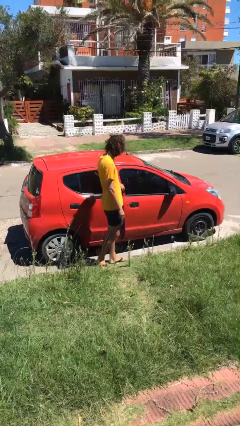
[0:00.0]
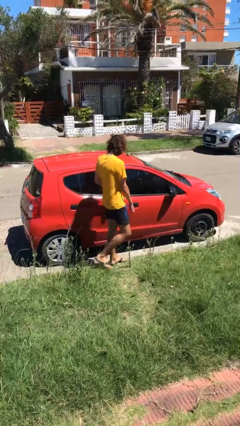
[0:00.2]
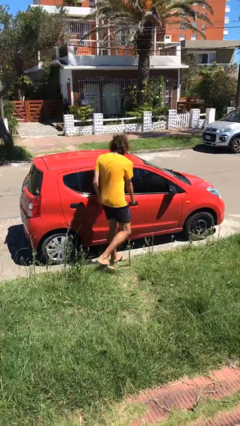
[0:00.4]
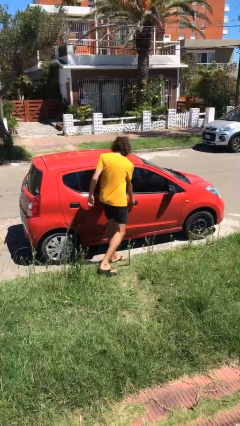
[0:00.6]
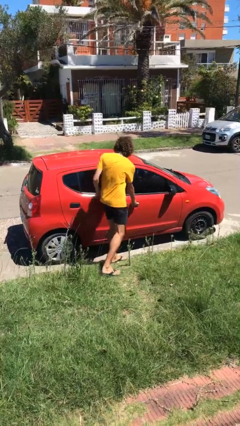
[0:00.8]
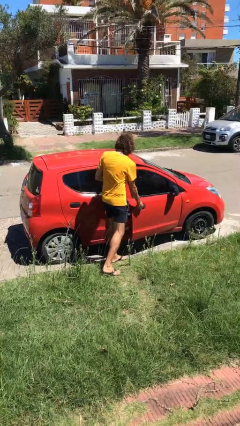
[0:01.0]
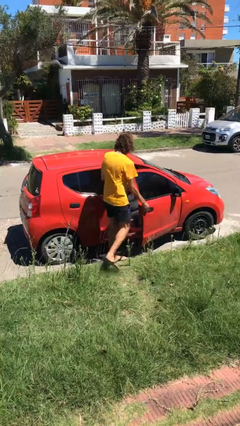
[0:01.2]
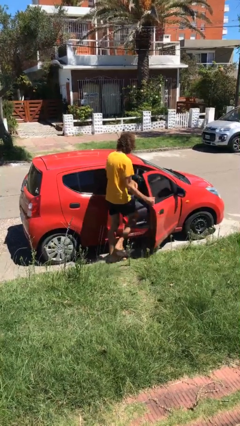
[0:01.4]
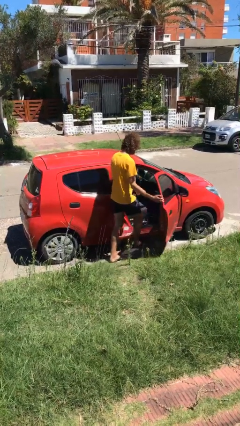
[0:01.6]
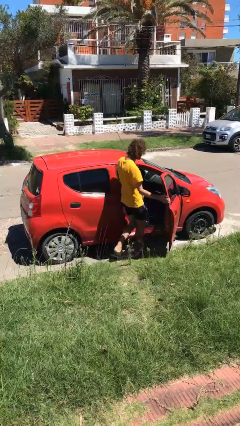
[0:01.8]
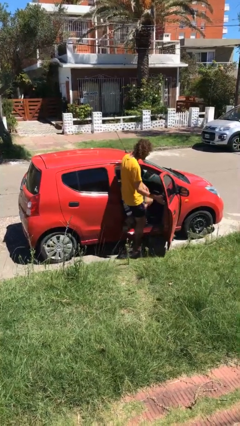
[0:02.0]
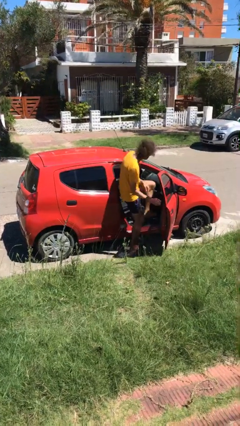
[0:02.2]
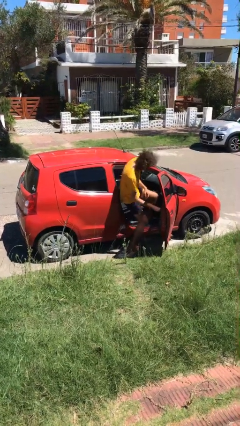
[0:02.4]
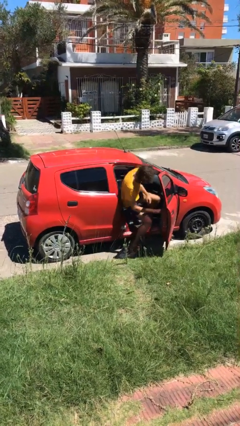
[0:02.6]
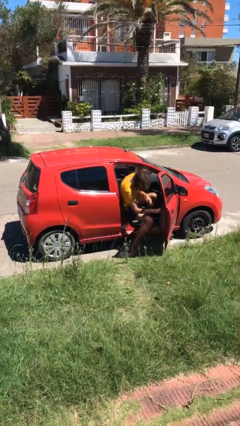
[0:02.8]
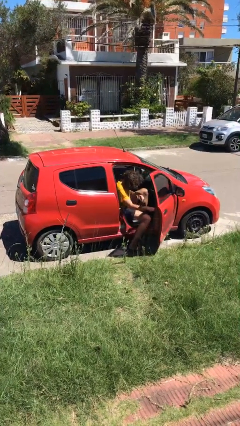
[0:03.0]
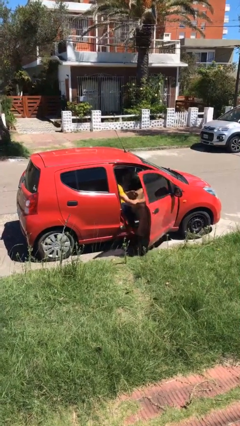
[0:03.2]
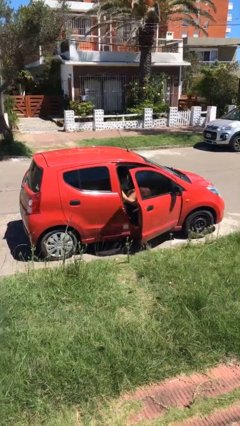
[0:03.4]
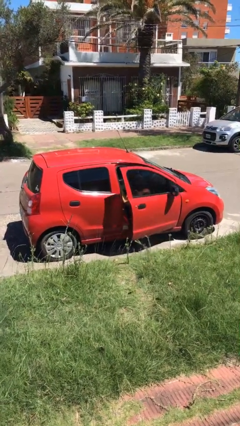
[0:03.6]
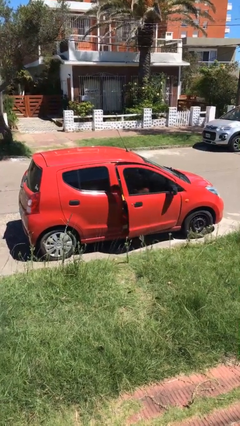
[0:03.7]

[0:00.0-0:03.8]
car picks up person

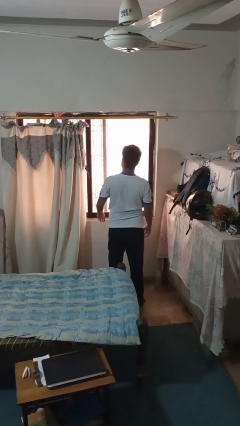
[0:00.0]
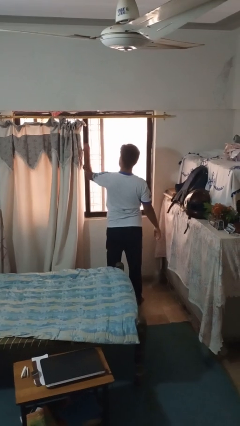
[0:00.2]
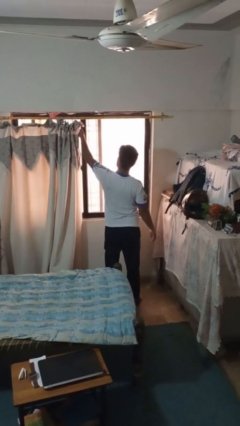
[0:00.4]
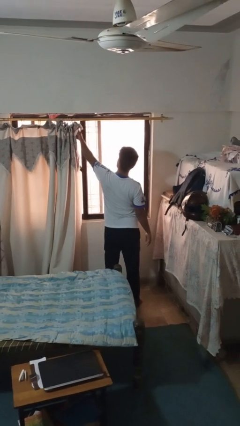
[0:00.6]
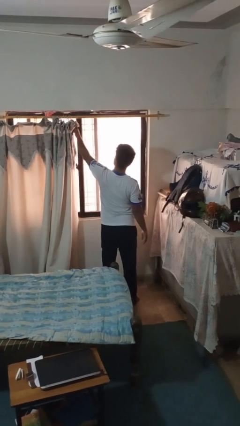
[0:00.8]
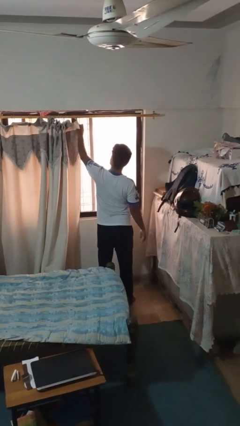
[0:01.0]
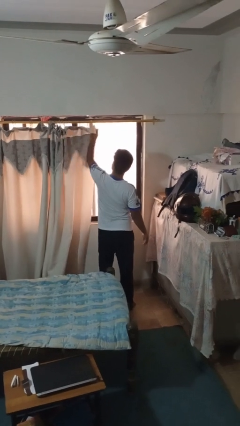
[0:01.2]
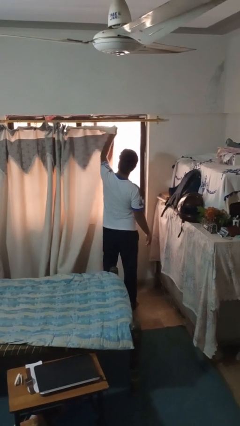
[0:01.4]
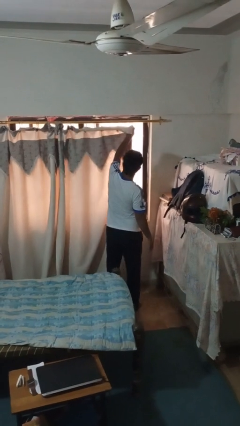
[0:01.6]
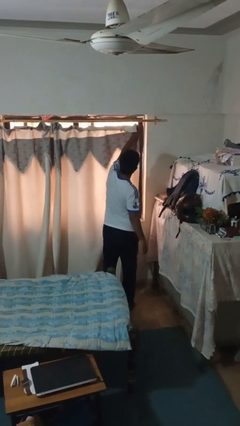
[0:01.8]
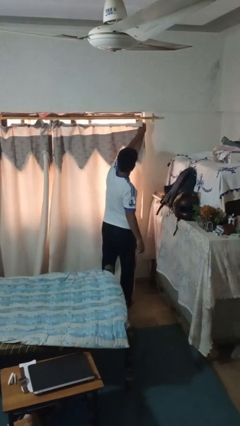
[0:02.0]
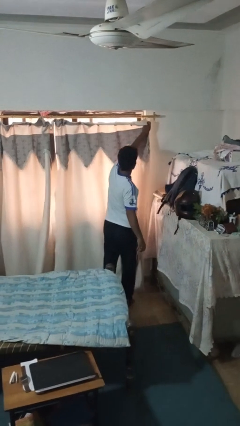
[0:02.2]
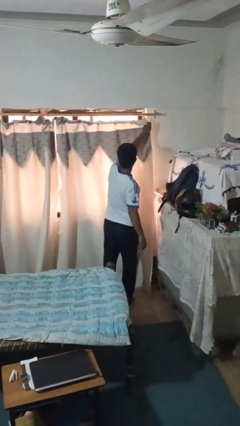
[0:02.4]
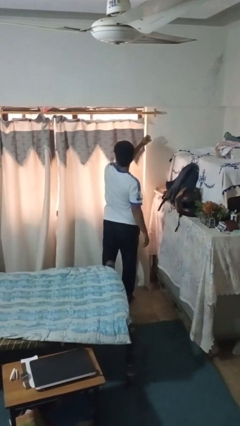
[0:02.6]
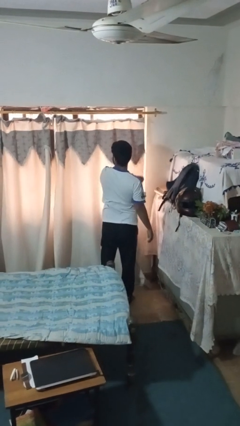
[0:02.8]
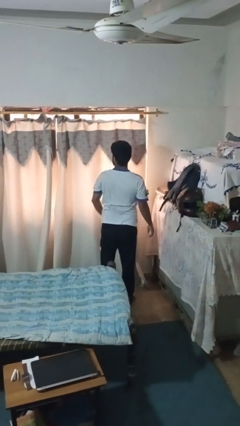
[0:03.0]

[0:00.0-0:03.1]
person closes curtains

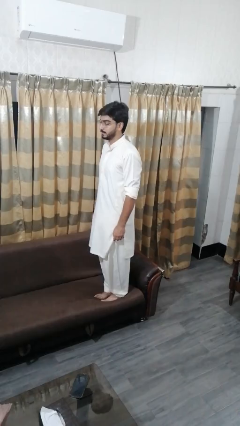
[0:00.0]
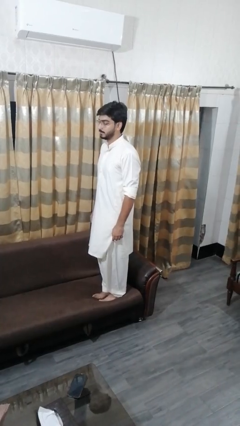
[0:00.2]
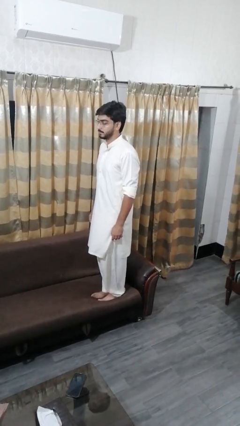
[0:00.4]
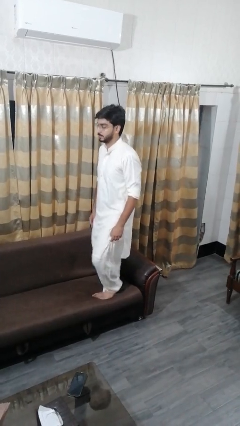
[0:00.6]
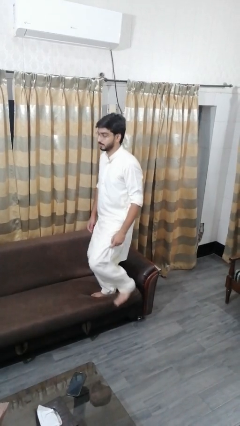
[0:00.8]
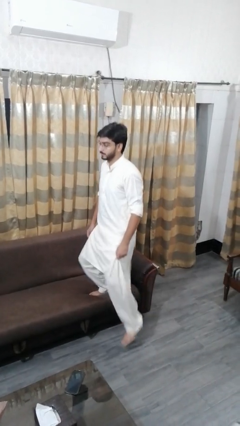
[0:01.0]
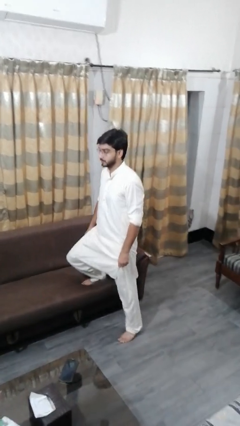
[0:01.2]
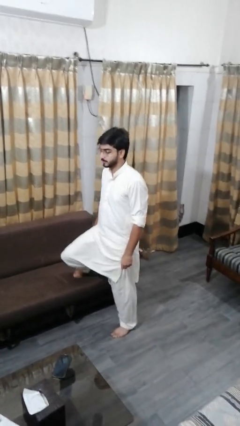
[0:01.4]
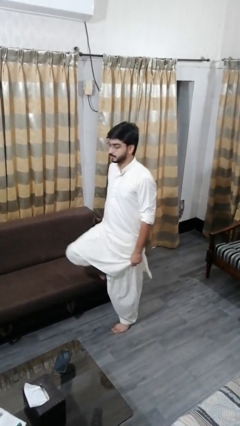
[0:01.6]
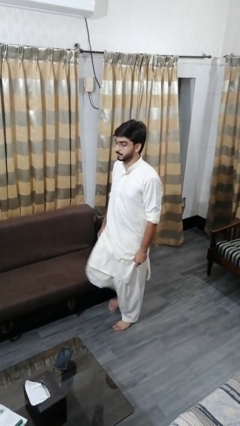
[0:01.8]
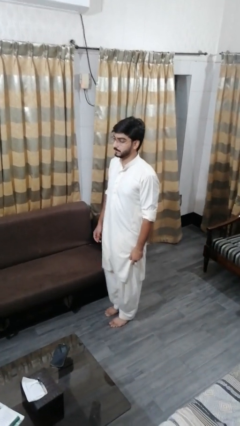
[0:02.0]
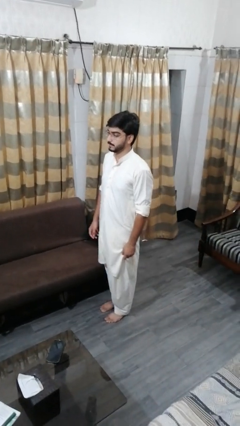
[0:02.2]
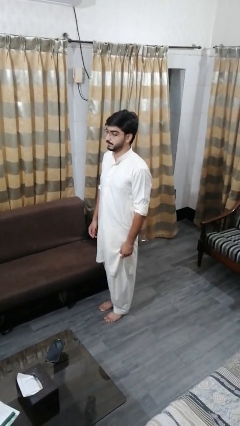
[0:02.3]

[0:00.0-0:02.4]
person climbs off couch

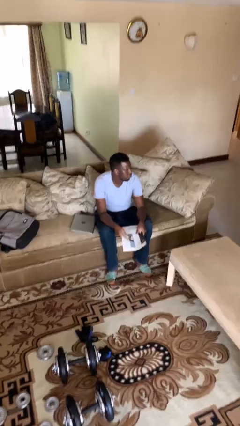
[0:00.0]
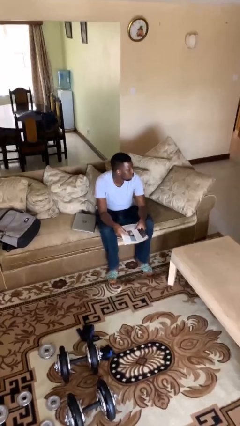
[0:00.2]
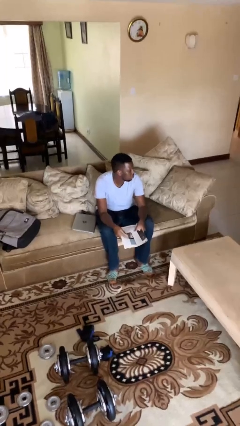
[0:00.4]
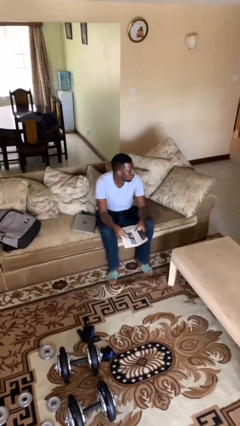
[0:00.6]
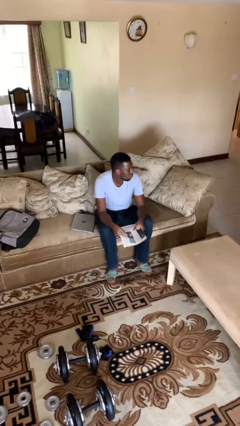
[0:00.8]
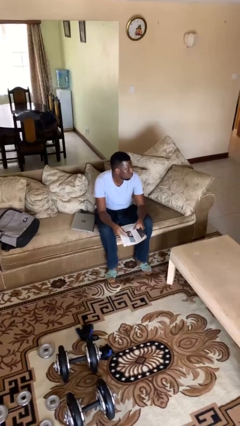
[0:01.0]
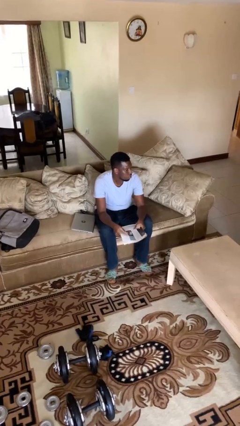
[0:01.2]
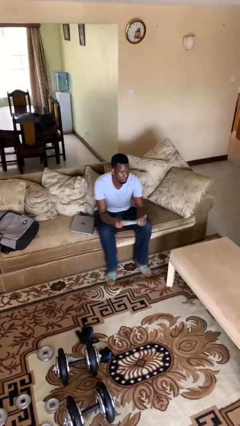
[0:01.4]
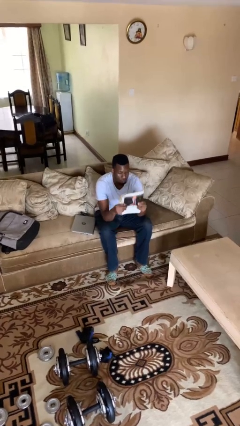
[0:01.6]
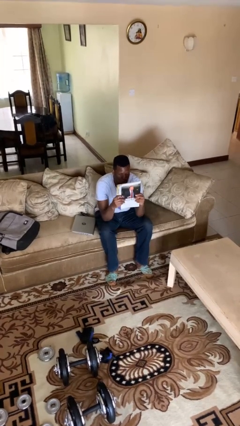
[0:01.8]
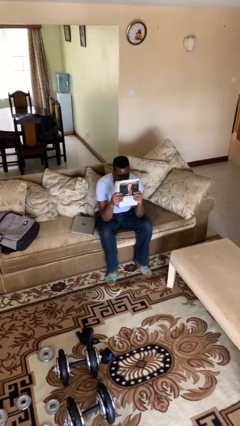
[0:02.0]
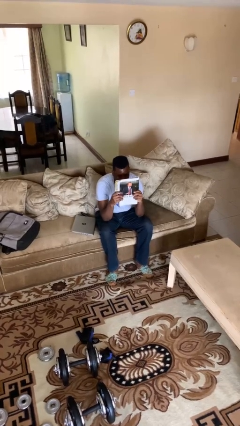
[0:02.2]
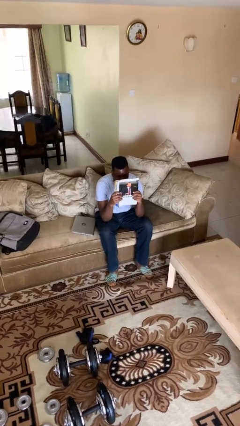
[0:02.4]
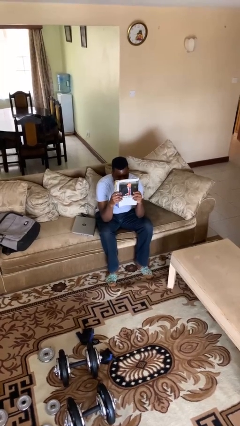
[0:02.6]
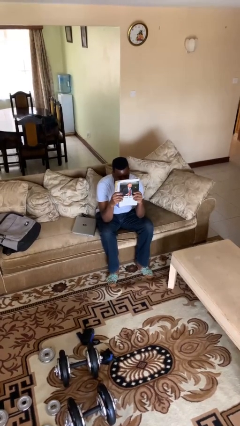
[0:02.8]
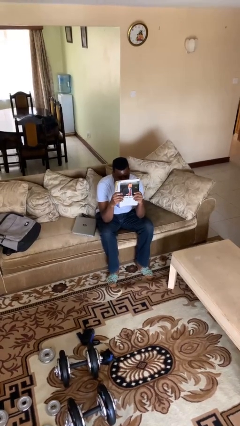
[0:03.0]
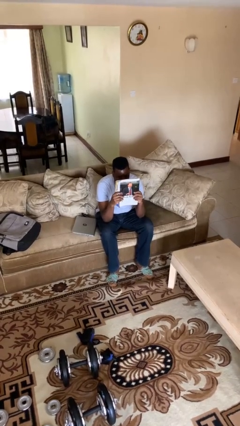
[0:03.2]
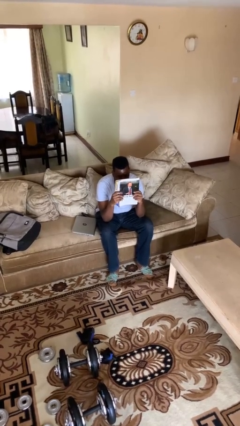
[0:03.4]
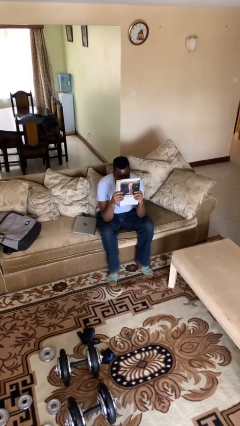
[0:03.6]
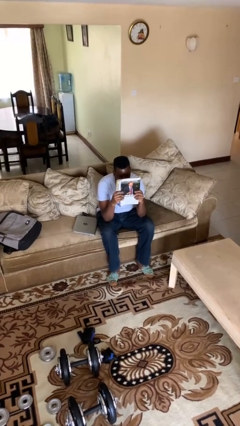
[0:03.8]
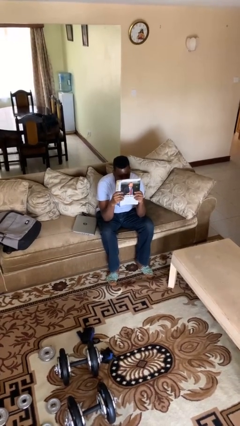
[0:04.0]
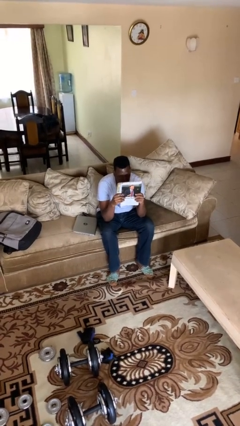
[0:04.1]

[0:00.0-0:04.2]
person reads document

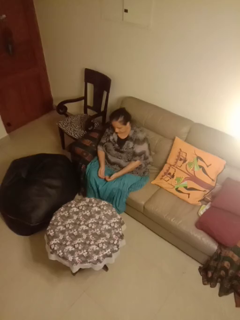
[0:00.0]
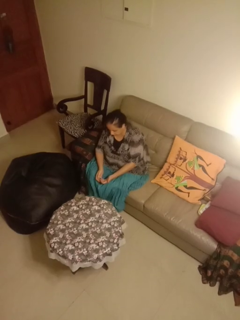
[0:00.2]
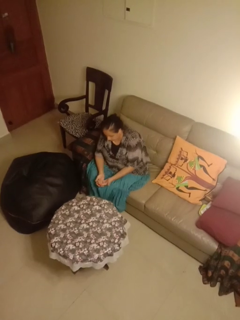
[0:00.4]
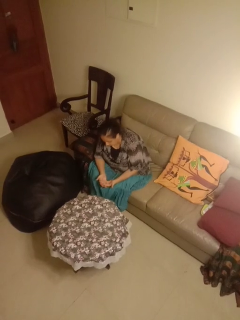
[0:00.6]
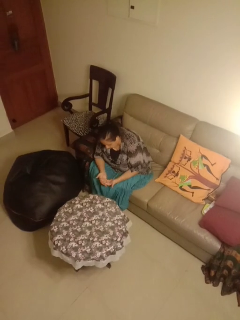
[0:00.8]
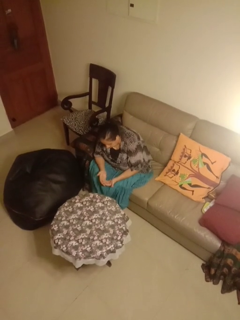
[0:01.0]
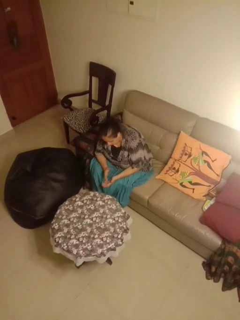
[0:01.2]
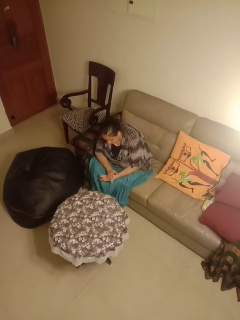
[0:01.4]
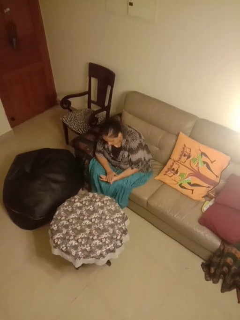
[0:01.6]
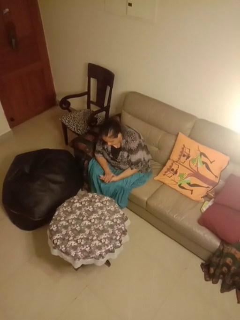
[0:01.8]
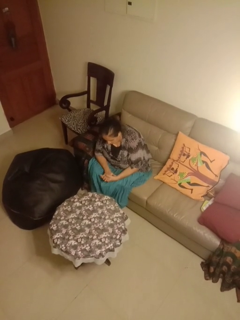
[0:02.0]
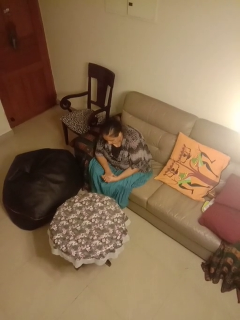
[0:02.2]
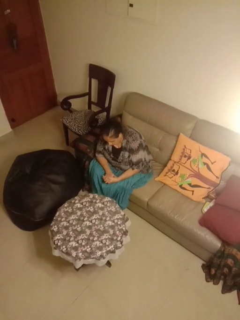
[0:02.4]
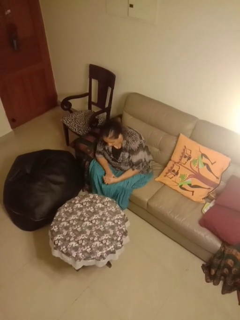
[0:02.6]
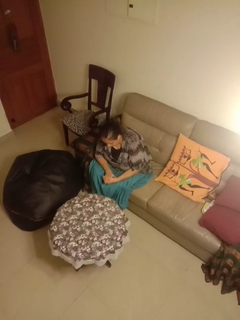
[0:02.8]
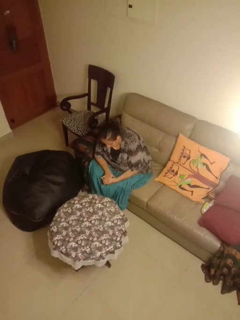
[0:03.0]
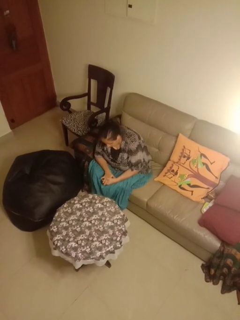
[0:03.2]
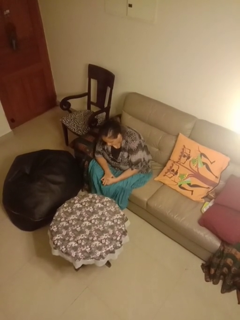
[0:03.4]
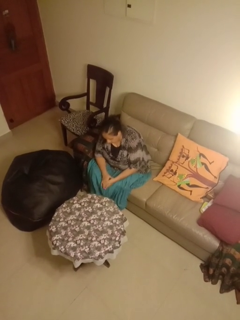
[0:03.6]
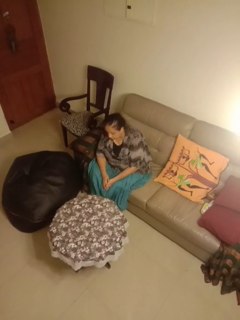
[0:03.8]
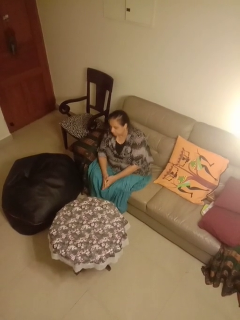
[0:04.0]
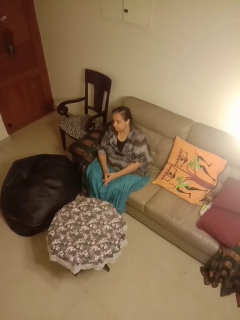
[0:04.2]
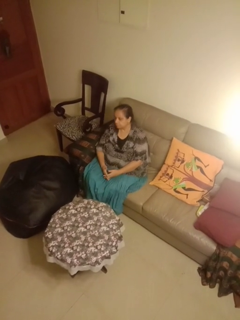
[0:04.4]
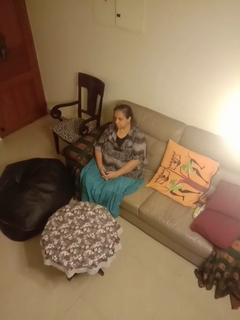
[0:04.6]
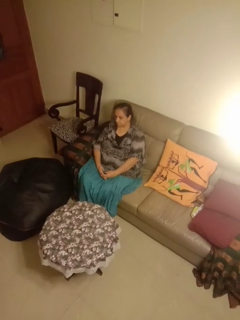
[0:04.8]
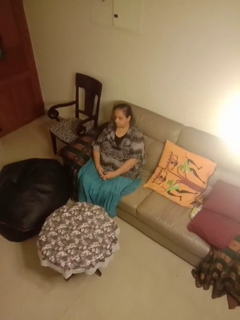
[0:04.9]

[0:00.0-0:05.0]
person looks at hands in lap

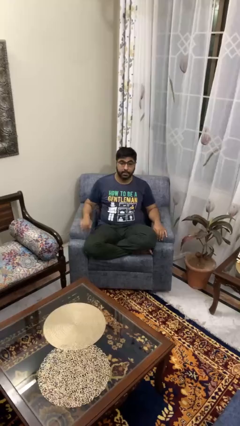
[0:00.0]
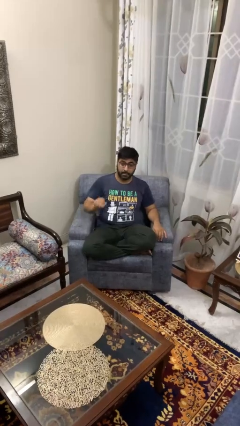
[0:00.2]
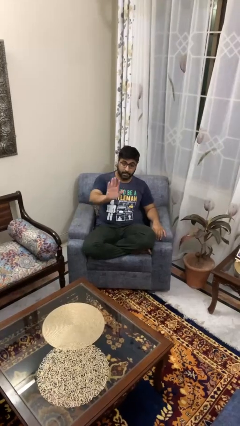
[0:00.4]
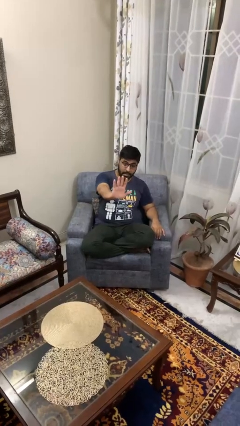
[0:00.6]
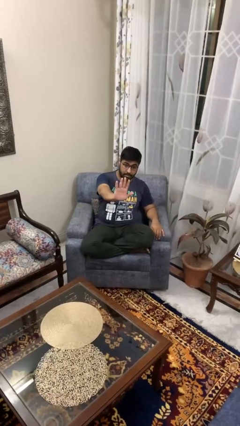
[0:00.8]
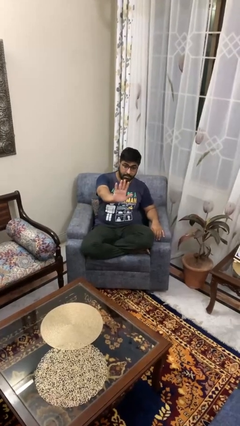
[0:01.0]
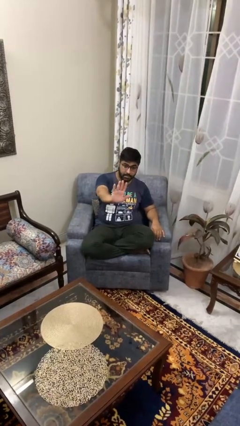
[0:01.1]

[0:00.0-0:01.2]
person gestures stop
